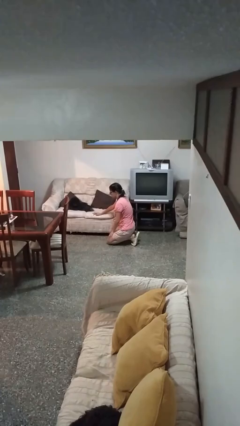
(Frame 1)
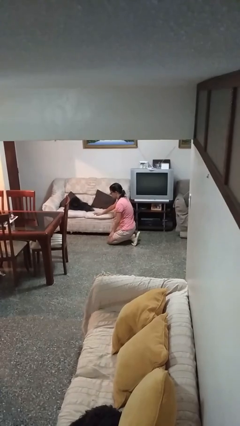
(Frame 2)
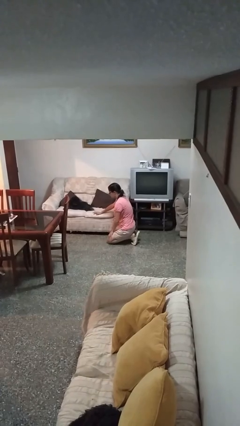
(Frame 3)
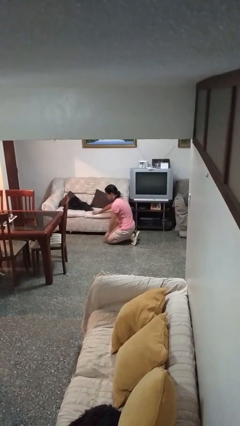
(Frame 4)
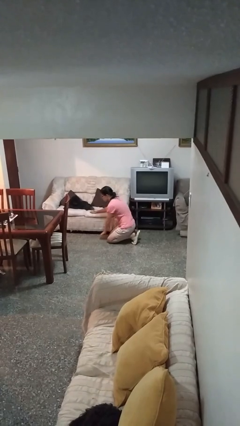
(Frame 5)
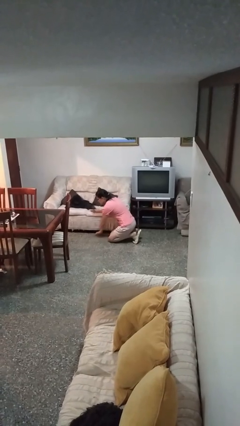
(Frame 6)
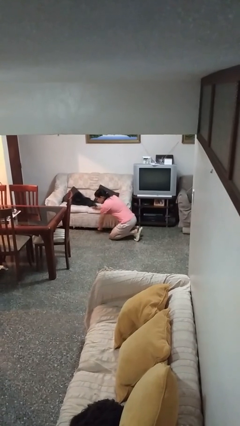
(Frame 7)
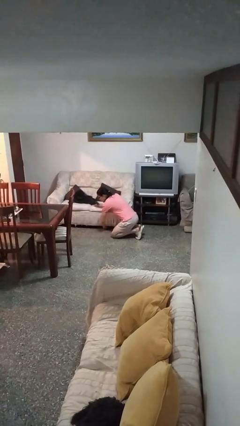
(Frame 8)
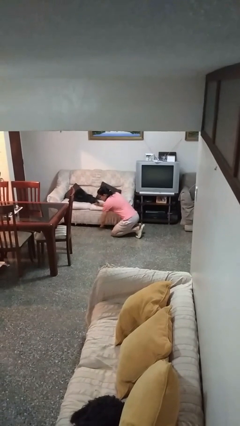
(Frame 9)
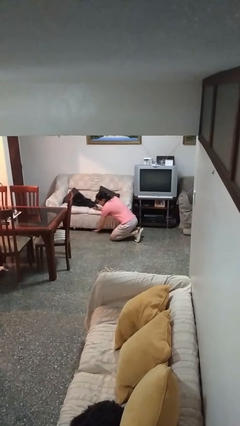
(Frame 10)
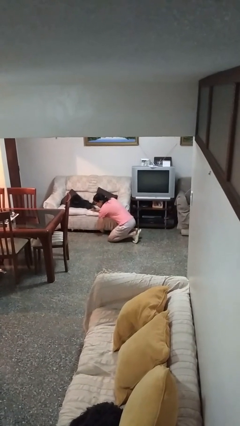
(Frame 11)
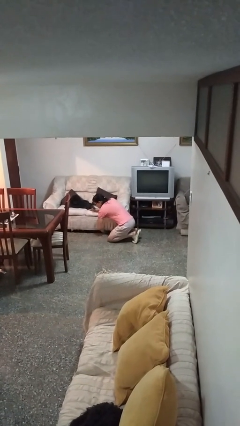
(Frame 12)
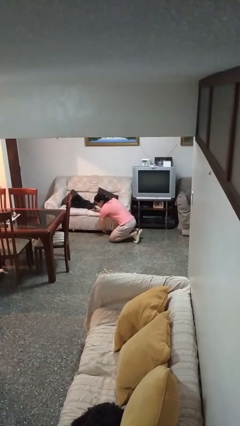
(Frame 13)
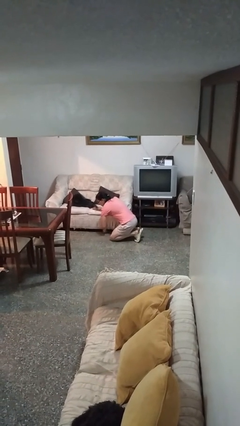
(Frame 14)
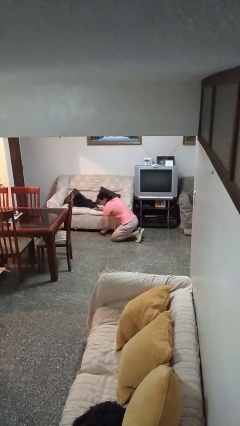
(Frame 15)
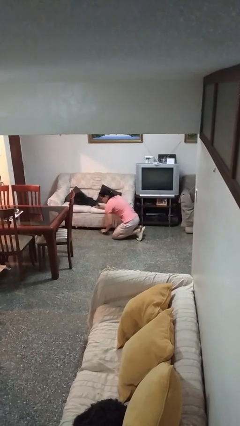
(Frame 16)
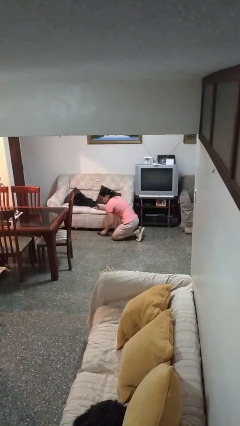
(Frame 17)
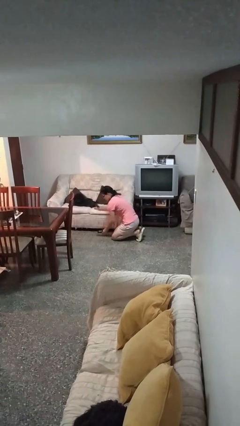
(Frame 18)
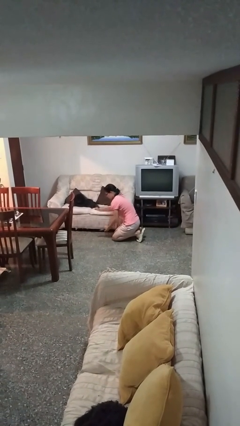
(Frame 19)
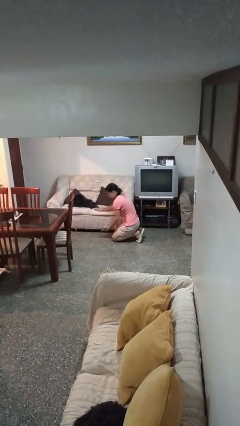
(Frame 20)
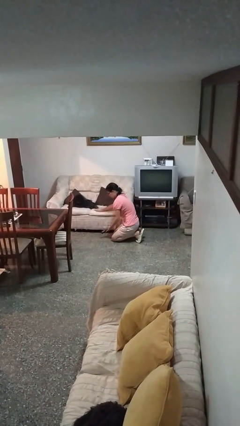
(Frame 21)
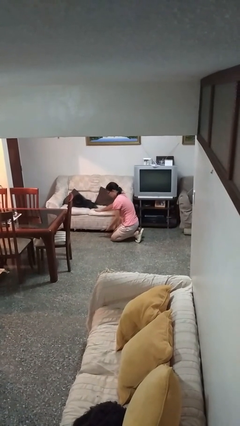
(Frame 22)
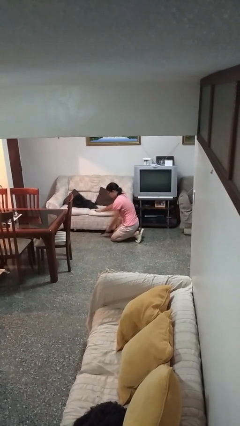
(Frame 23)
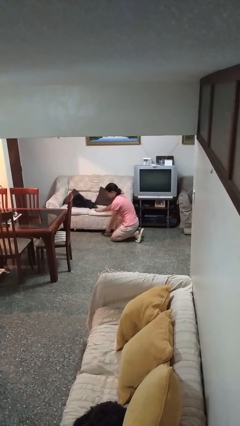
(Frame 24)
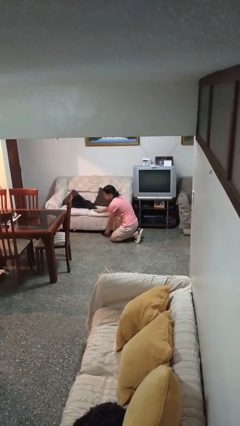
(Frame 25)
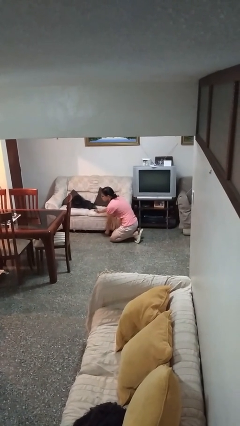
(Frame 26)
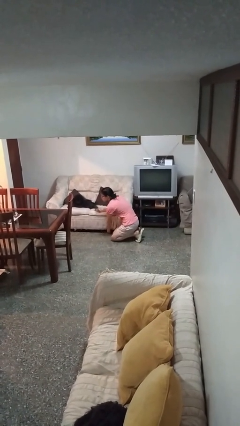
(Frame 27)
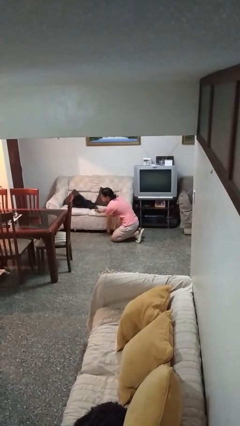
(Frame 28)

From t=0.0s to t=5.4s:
person searches under couch

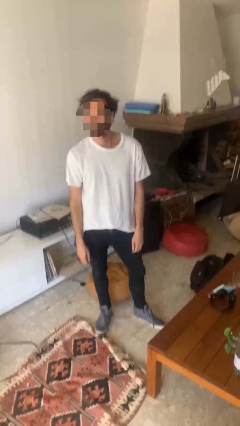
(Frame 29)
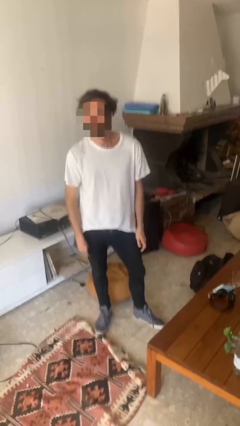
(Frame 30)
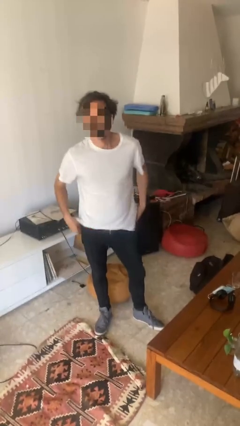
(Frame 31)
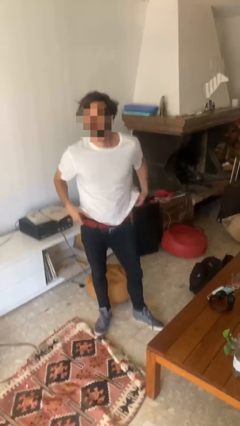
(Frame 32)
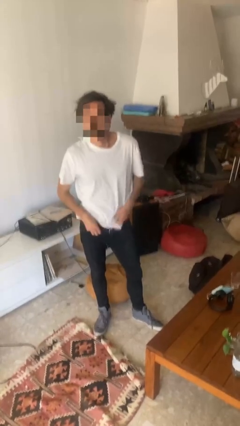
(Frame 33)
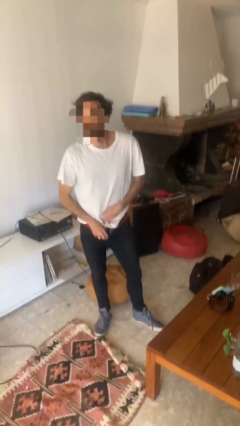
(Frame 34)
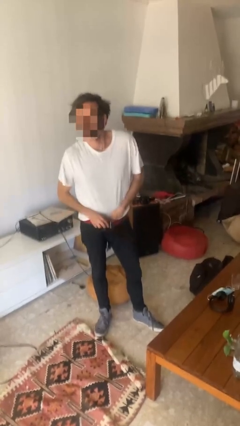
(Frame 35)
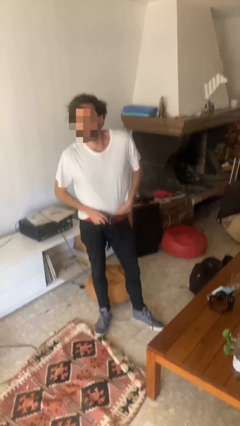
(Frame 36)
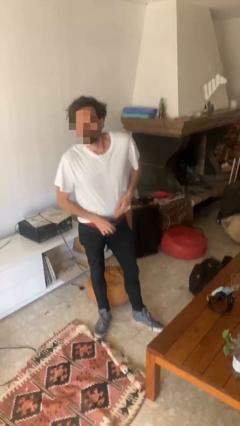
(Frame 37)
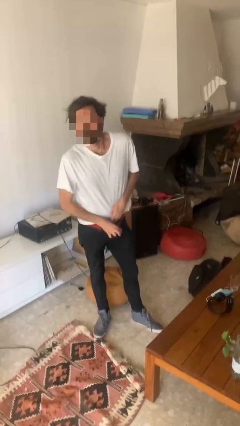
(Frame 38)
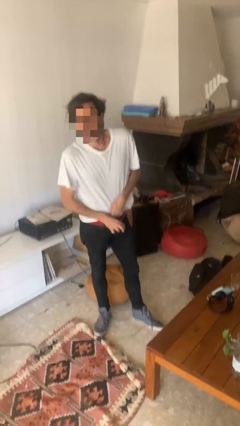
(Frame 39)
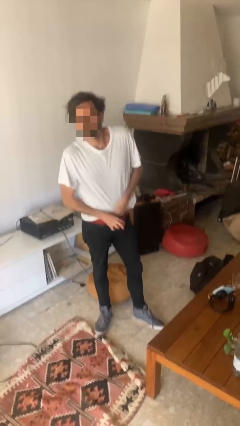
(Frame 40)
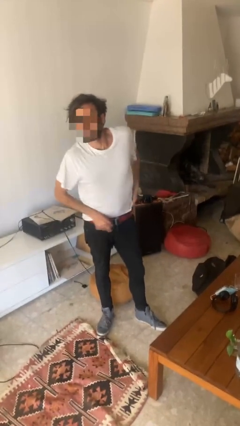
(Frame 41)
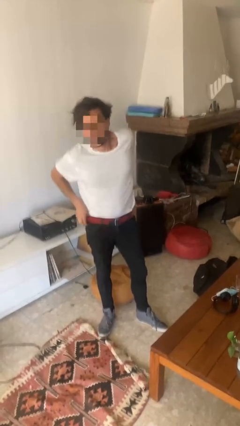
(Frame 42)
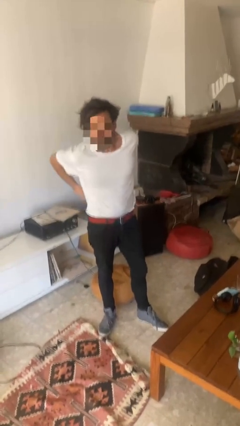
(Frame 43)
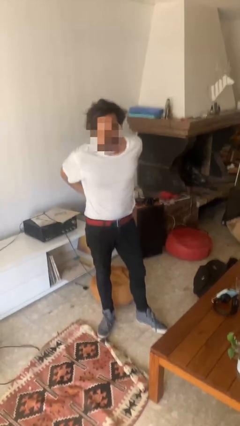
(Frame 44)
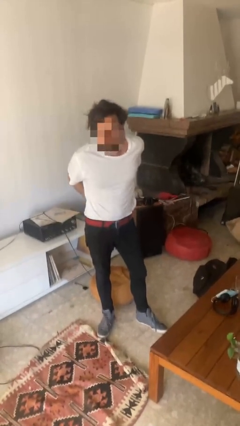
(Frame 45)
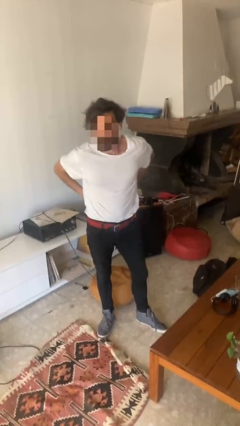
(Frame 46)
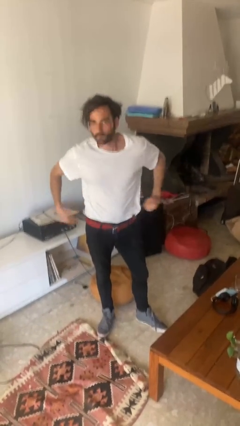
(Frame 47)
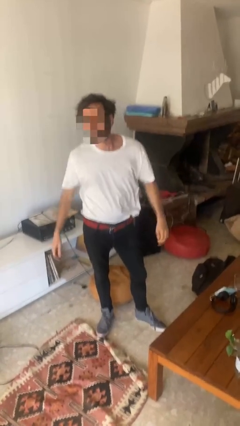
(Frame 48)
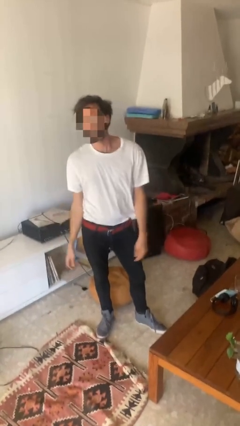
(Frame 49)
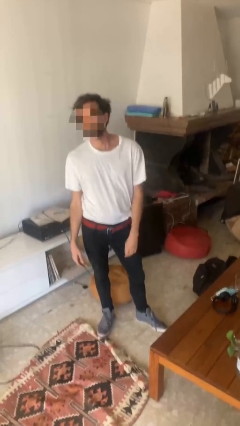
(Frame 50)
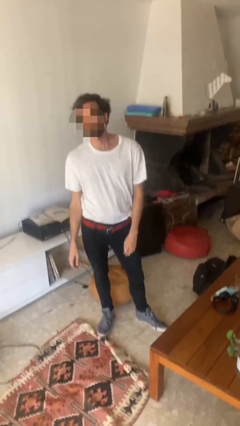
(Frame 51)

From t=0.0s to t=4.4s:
person tucks in shirt

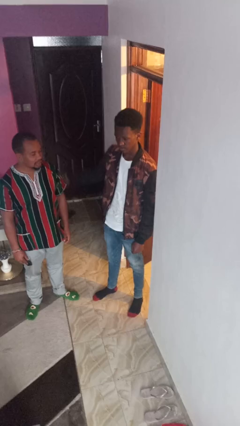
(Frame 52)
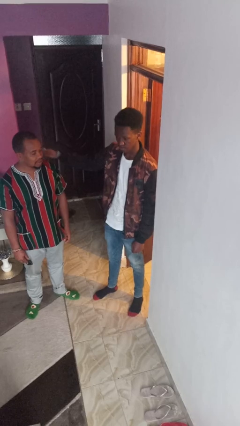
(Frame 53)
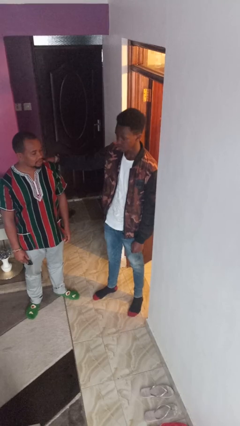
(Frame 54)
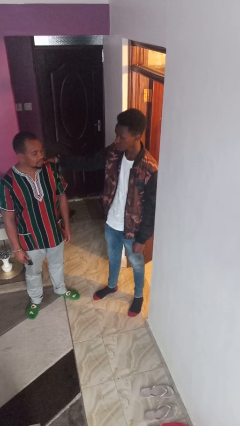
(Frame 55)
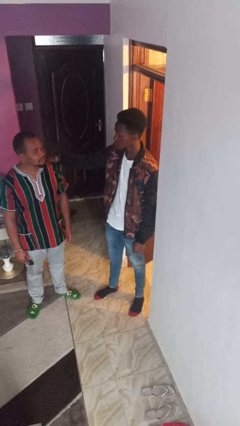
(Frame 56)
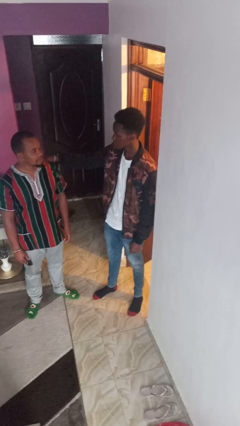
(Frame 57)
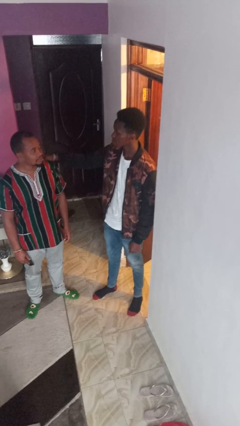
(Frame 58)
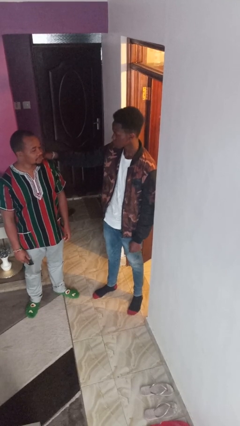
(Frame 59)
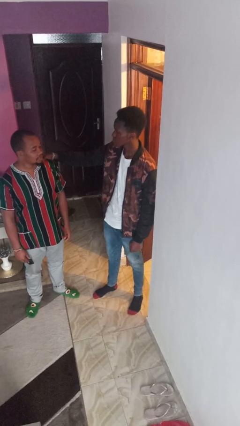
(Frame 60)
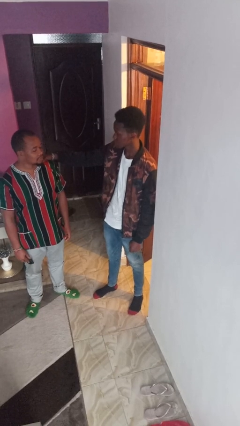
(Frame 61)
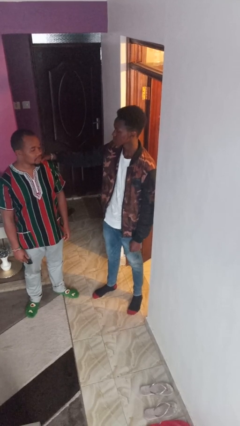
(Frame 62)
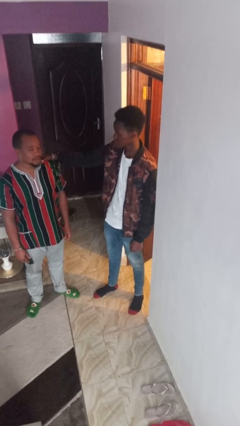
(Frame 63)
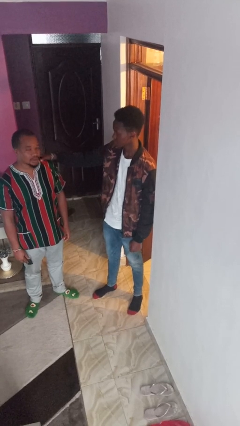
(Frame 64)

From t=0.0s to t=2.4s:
person pounds shoulders of person

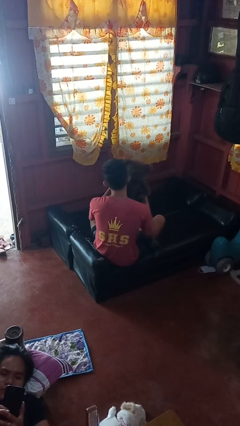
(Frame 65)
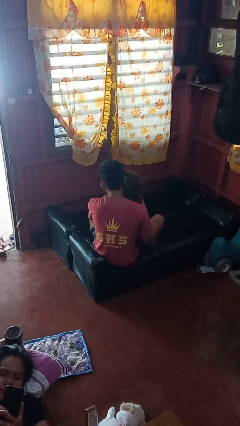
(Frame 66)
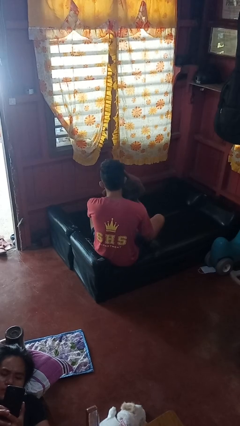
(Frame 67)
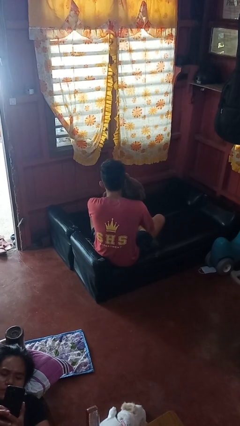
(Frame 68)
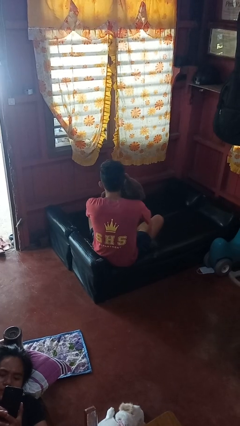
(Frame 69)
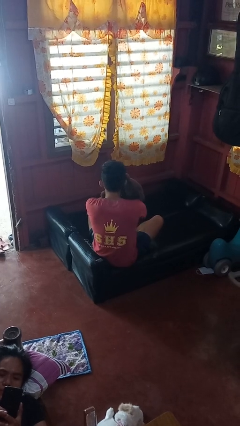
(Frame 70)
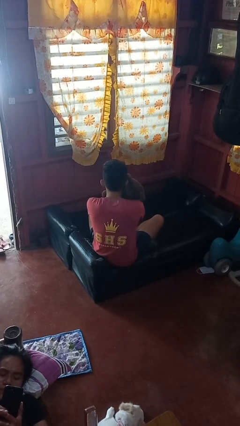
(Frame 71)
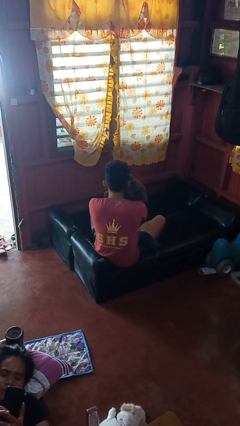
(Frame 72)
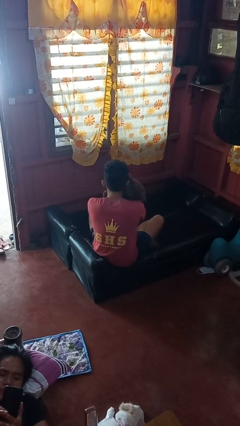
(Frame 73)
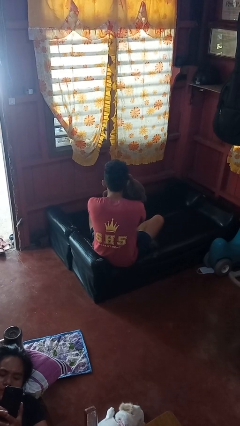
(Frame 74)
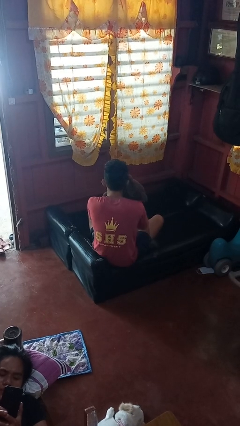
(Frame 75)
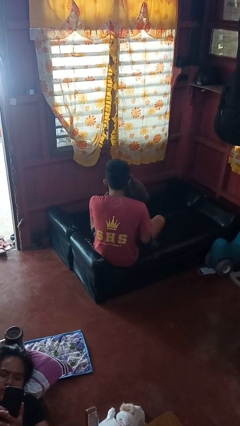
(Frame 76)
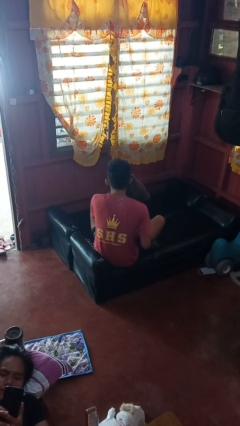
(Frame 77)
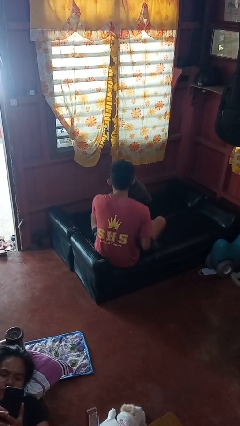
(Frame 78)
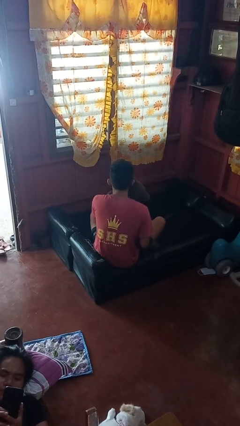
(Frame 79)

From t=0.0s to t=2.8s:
person hugs stuffed animal

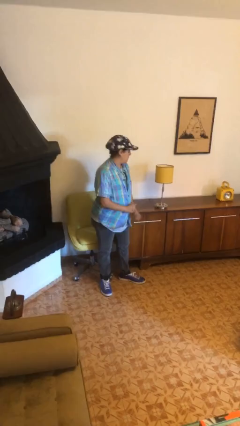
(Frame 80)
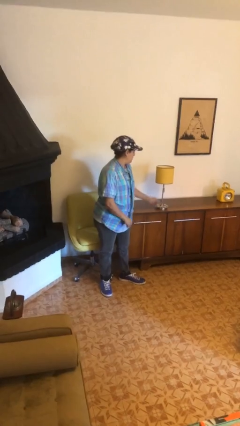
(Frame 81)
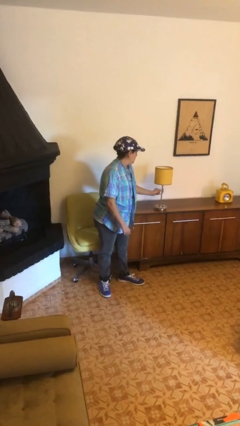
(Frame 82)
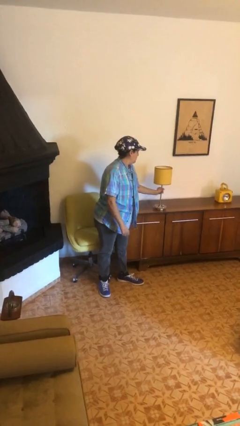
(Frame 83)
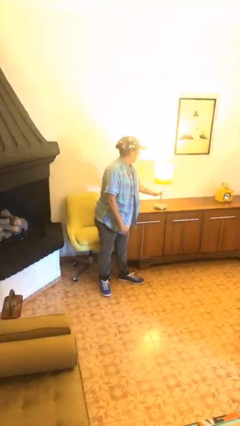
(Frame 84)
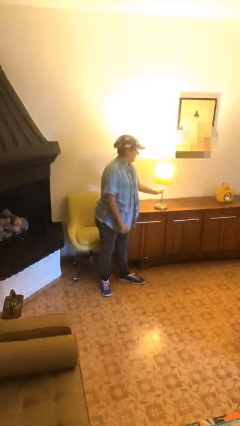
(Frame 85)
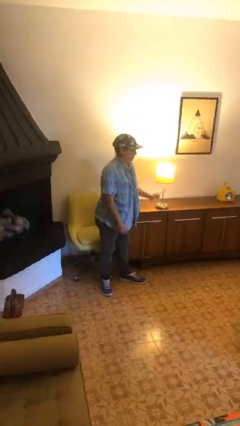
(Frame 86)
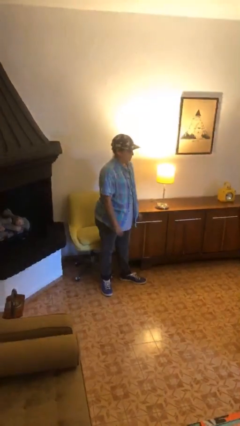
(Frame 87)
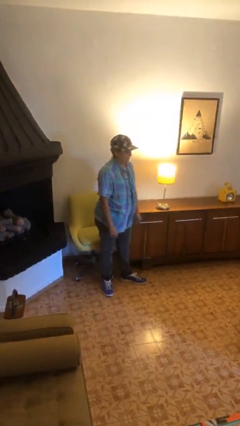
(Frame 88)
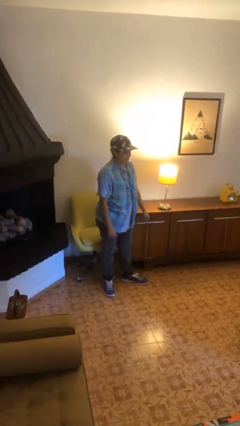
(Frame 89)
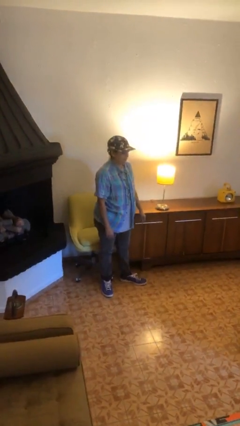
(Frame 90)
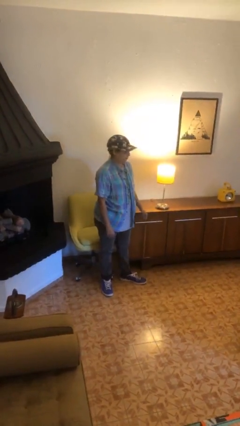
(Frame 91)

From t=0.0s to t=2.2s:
person turns on lamp

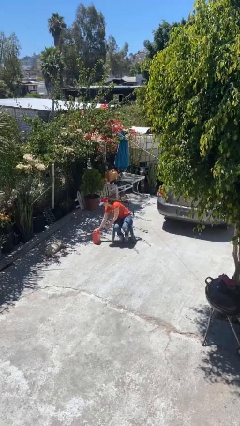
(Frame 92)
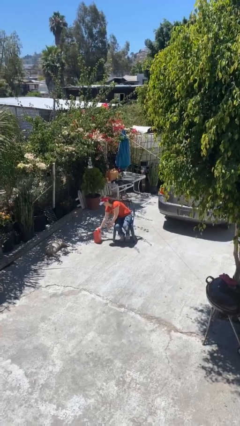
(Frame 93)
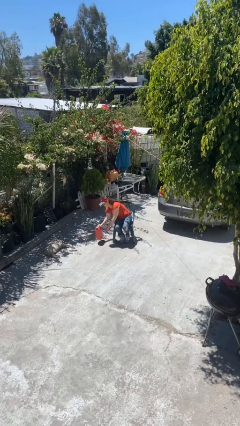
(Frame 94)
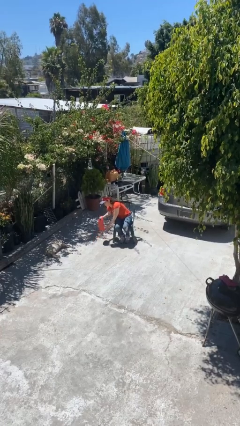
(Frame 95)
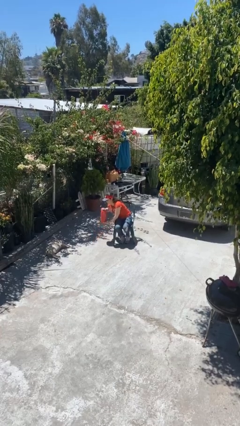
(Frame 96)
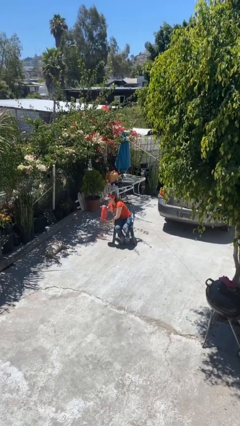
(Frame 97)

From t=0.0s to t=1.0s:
person picks up object from floor
